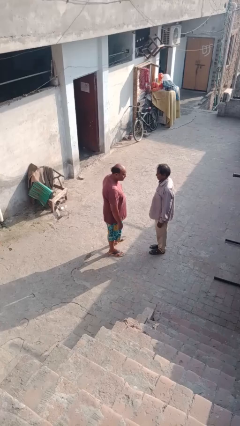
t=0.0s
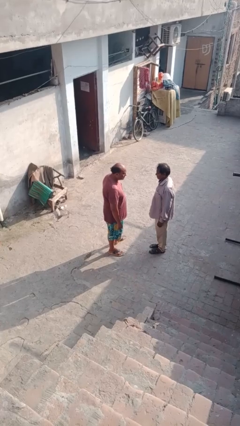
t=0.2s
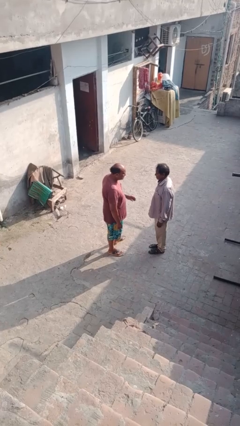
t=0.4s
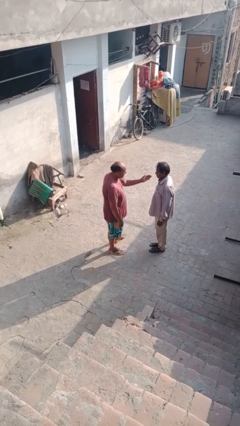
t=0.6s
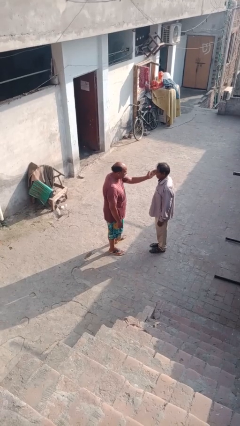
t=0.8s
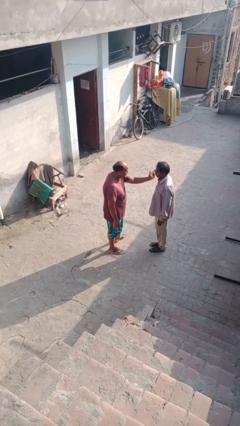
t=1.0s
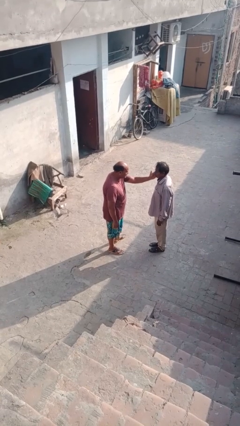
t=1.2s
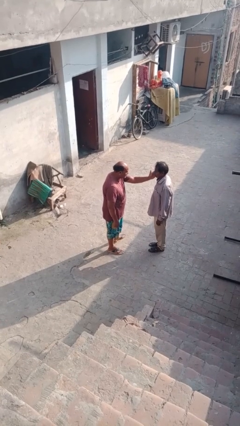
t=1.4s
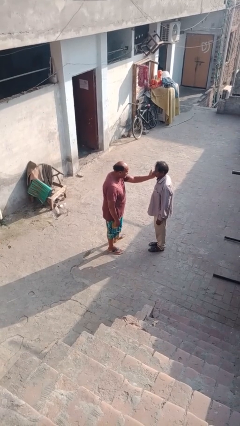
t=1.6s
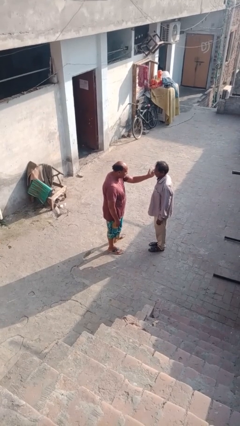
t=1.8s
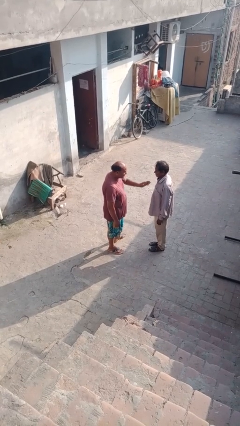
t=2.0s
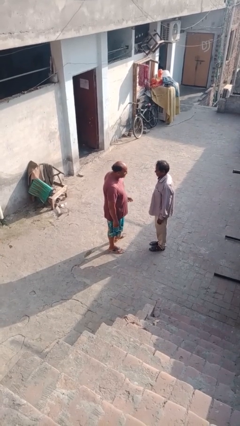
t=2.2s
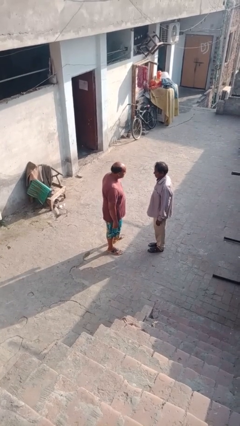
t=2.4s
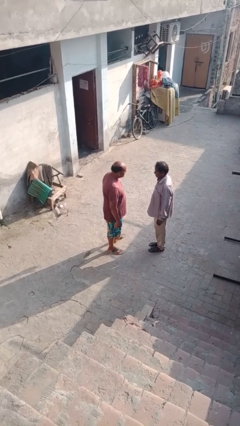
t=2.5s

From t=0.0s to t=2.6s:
person touches face of person

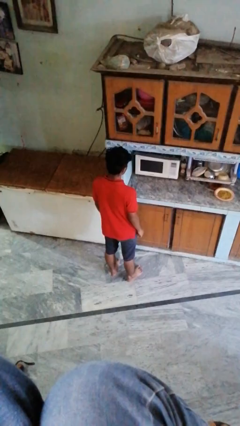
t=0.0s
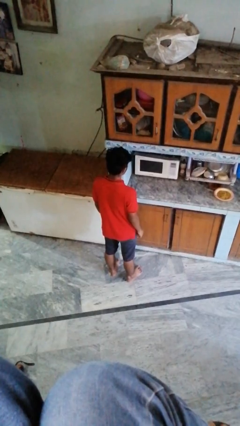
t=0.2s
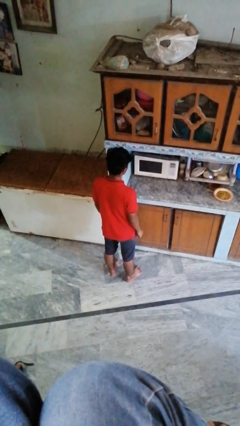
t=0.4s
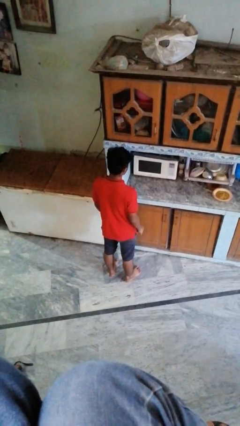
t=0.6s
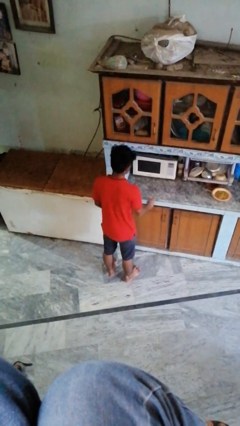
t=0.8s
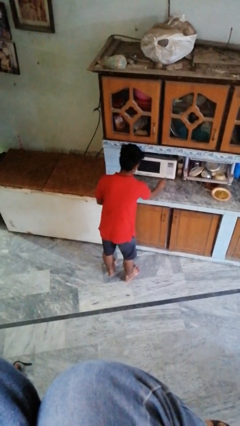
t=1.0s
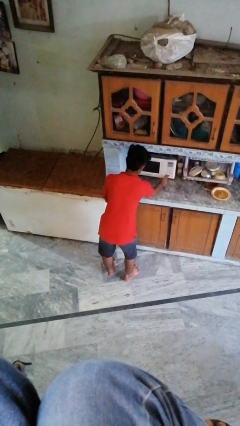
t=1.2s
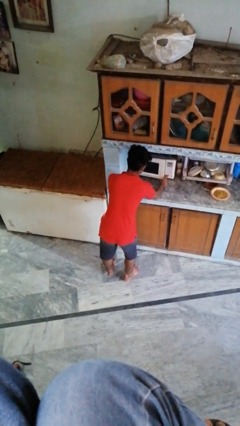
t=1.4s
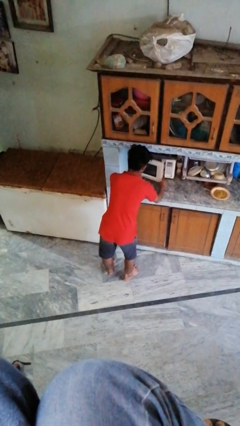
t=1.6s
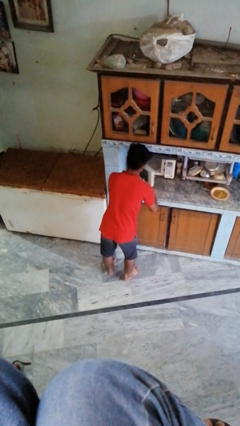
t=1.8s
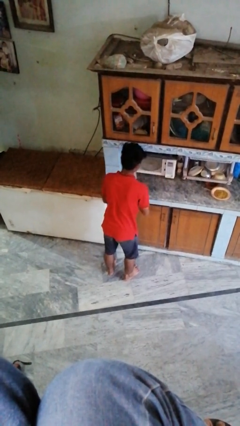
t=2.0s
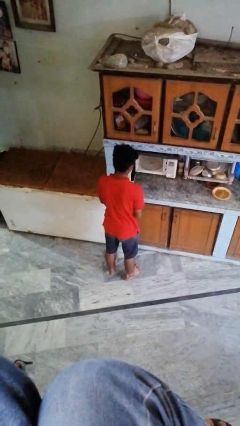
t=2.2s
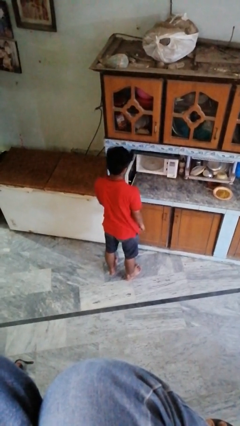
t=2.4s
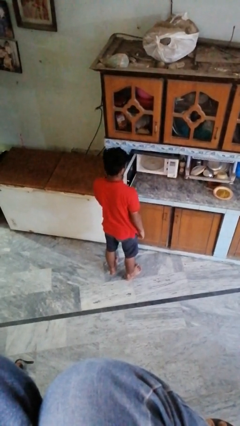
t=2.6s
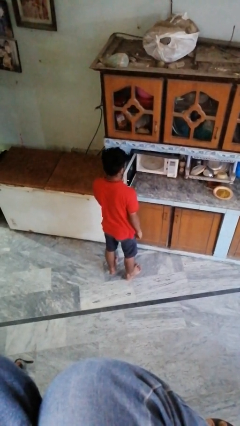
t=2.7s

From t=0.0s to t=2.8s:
person opens oven door

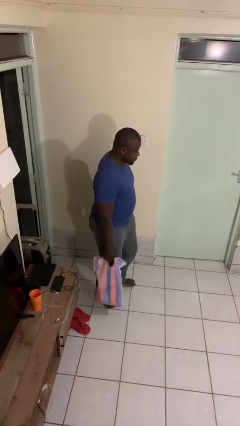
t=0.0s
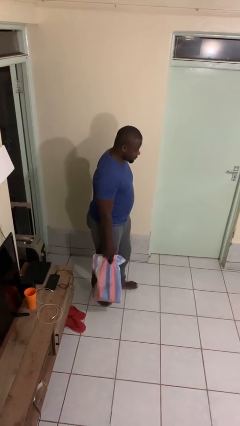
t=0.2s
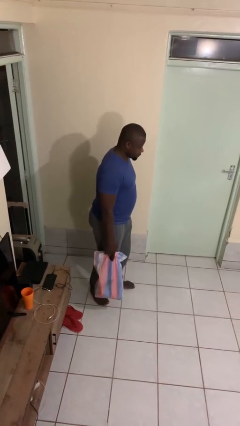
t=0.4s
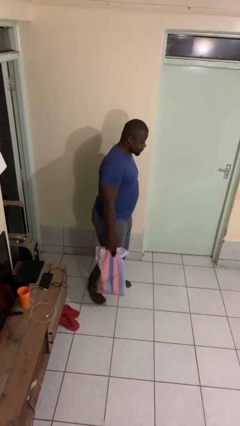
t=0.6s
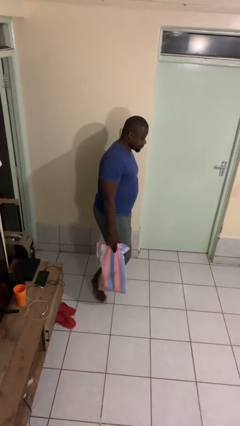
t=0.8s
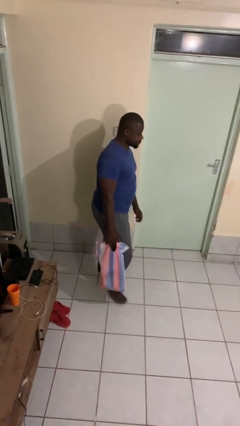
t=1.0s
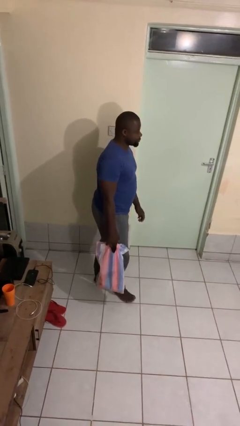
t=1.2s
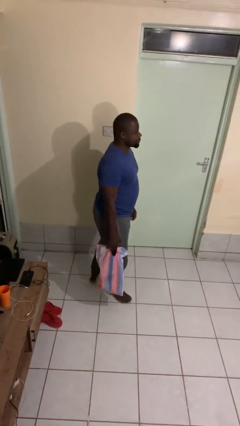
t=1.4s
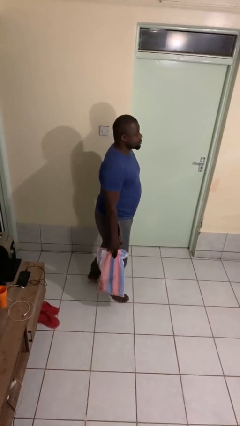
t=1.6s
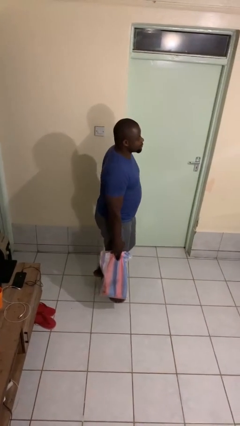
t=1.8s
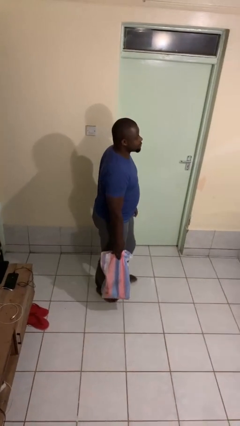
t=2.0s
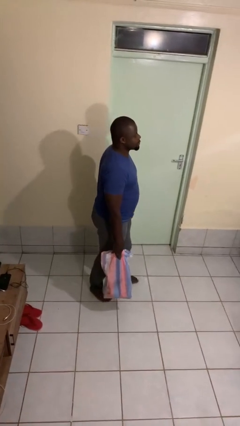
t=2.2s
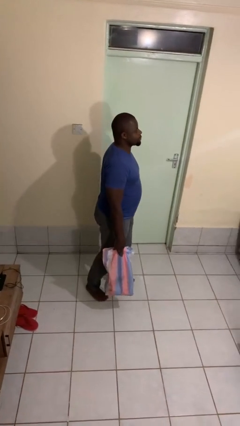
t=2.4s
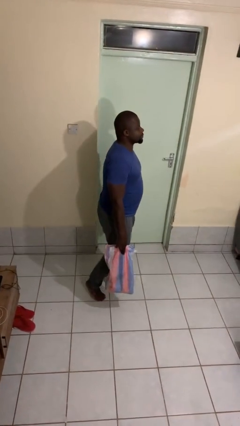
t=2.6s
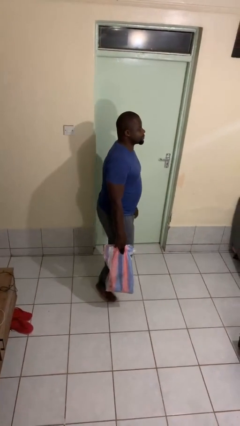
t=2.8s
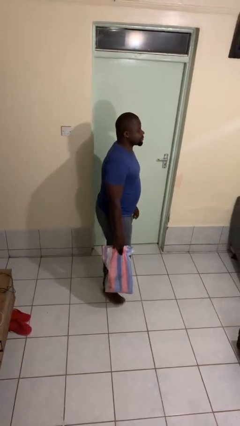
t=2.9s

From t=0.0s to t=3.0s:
person carries groceries

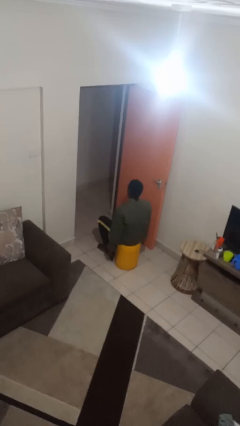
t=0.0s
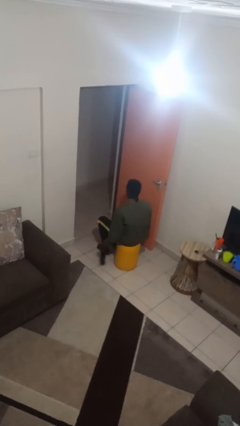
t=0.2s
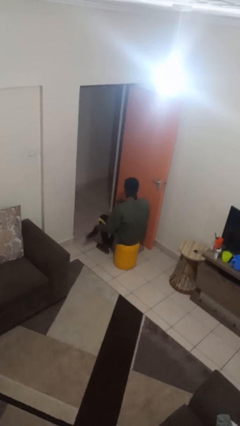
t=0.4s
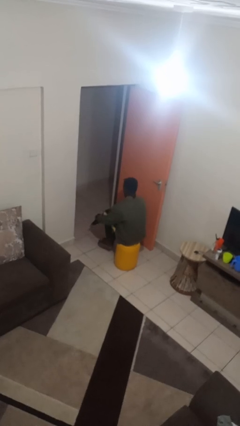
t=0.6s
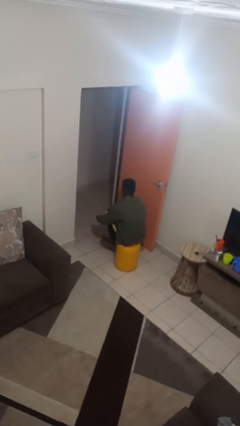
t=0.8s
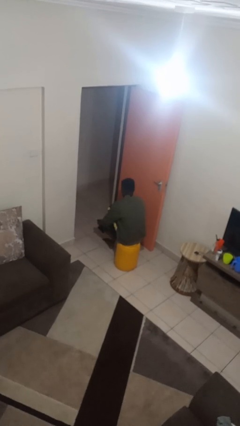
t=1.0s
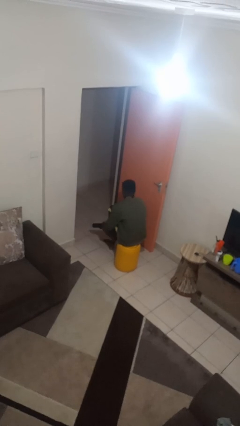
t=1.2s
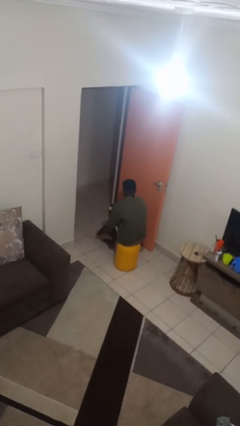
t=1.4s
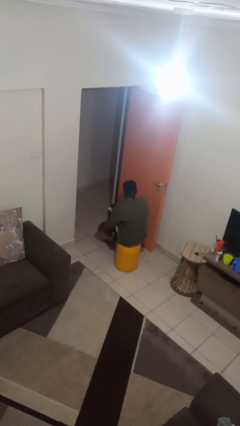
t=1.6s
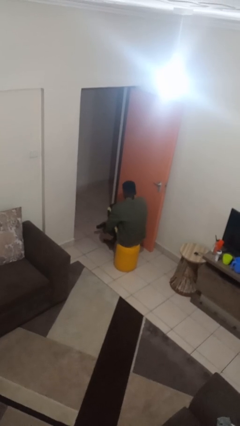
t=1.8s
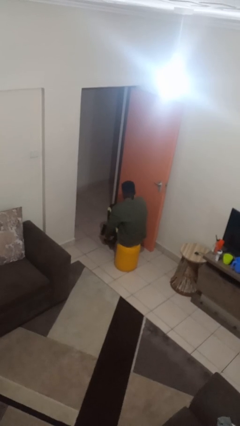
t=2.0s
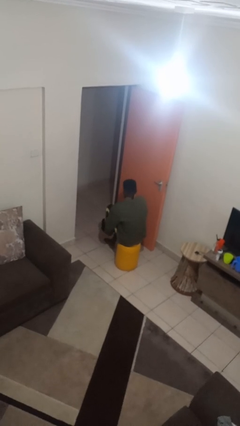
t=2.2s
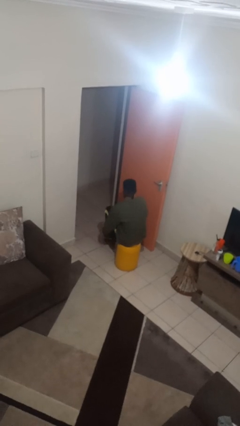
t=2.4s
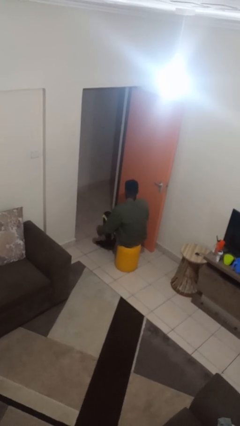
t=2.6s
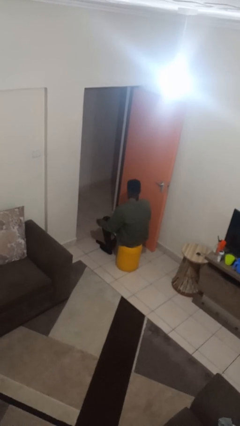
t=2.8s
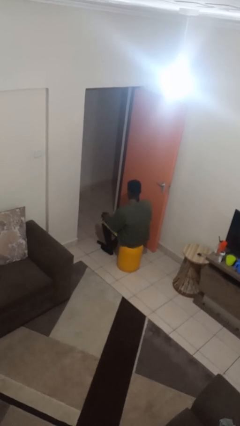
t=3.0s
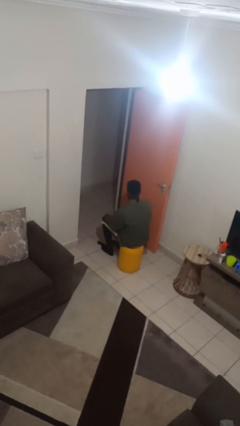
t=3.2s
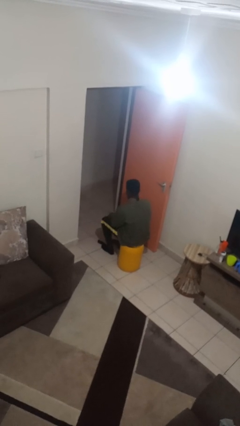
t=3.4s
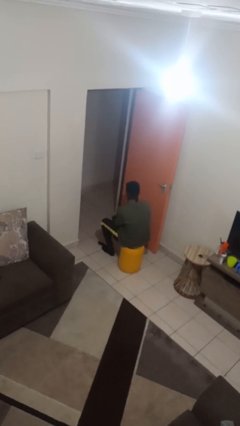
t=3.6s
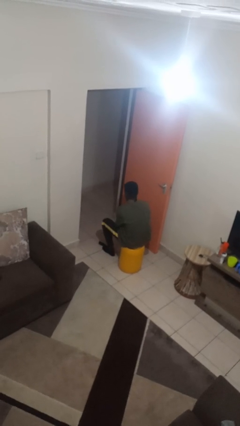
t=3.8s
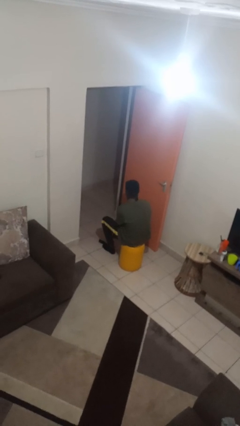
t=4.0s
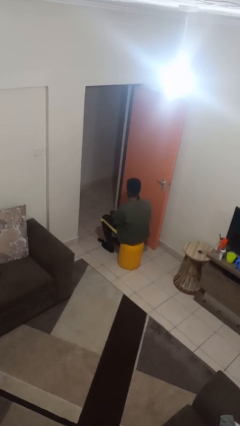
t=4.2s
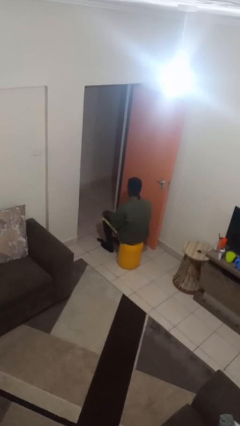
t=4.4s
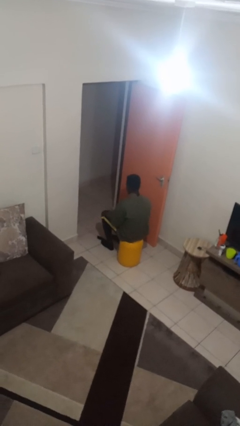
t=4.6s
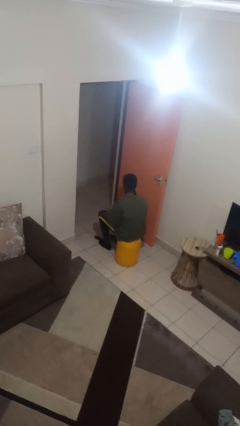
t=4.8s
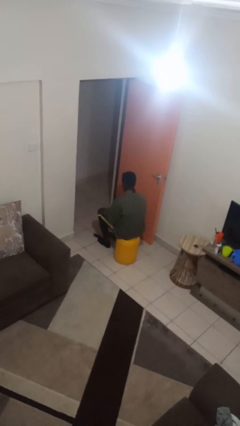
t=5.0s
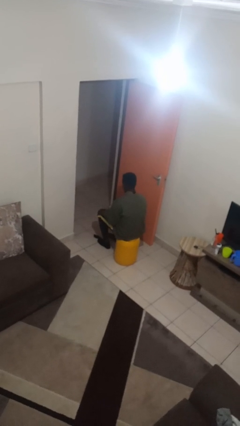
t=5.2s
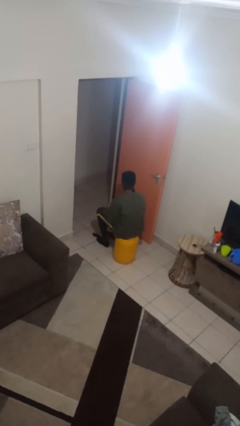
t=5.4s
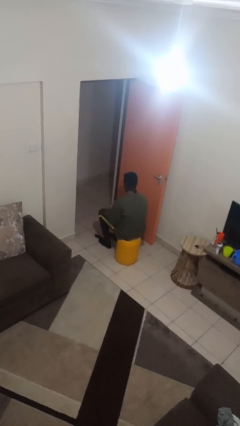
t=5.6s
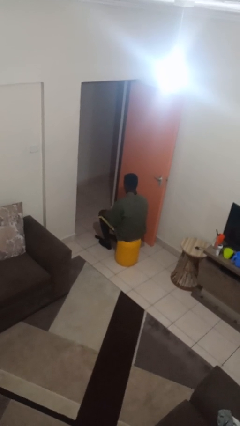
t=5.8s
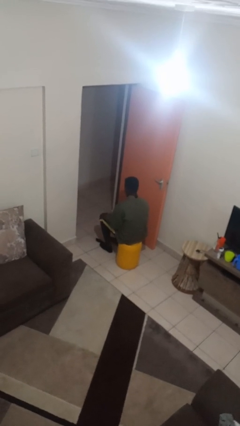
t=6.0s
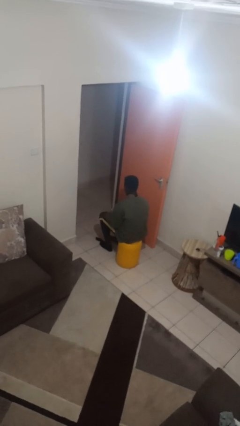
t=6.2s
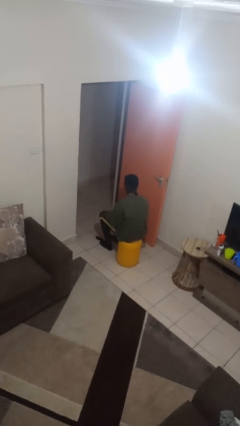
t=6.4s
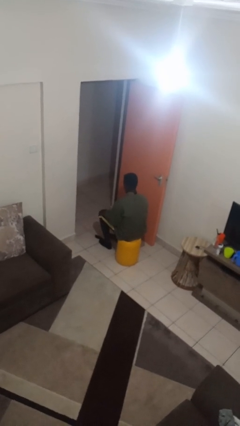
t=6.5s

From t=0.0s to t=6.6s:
person puts on socks

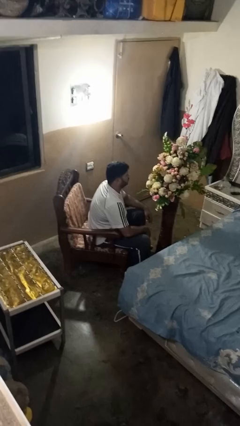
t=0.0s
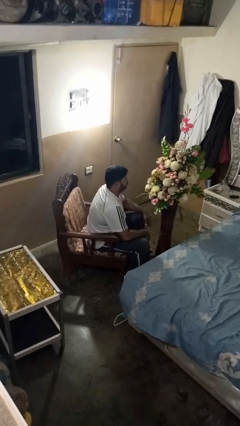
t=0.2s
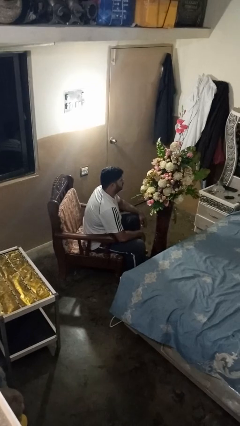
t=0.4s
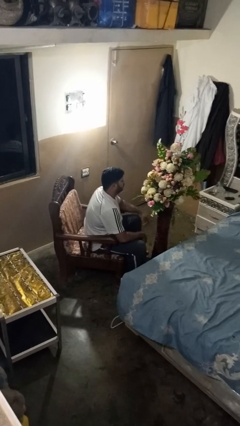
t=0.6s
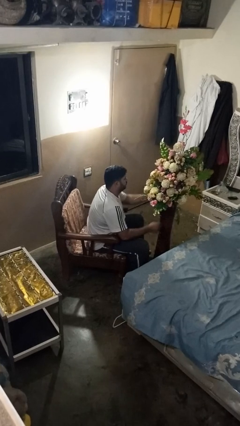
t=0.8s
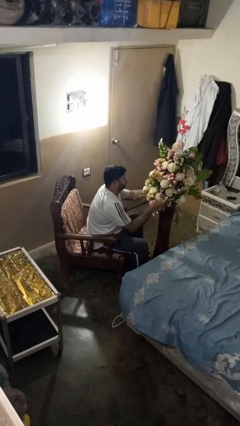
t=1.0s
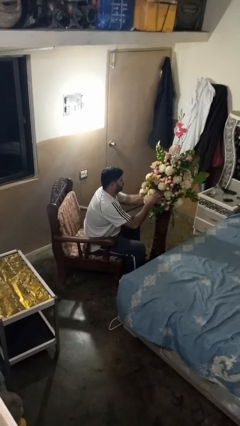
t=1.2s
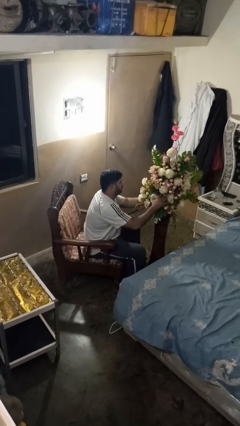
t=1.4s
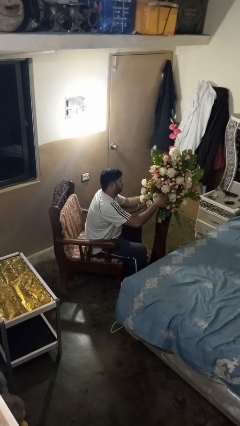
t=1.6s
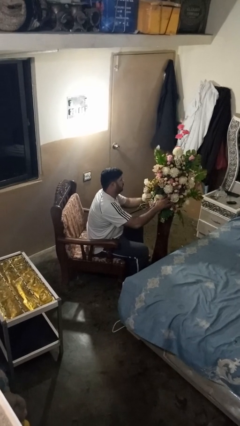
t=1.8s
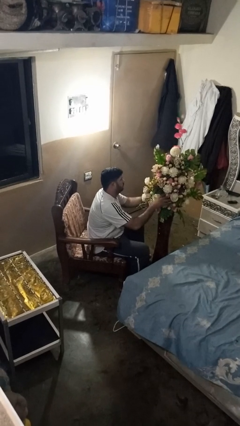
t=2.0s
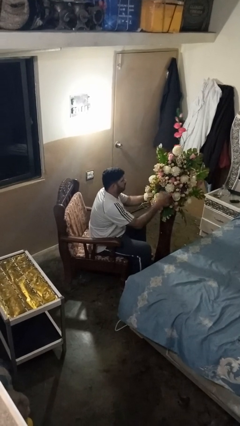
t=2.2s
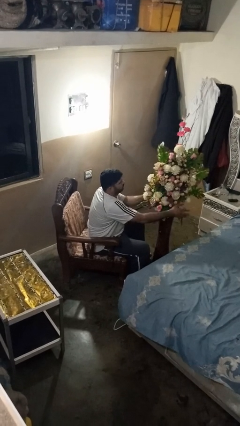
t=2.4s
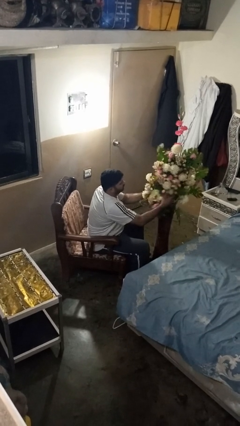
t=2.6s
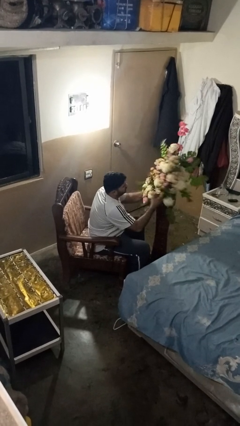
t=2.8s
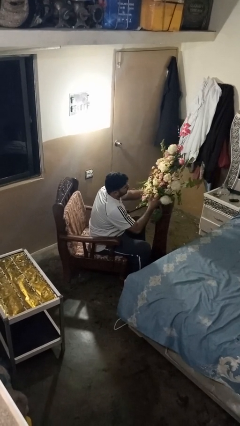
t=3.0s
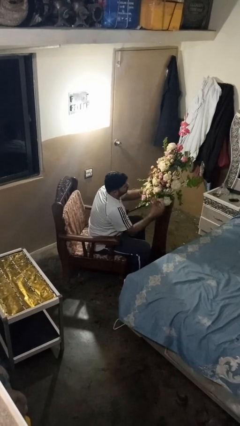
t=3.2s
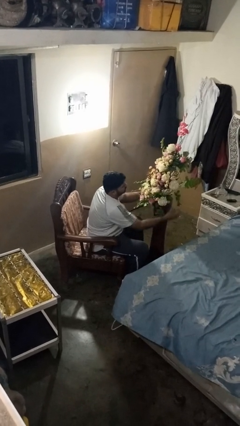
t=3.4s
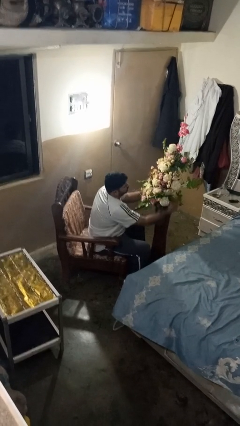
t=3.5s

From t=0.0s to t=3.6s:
person arranges flowers in vase
